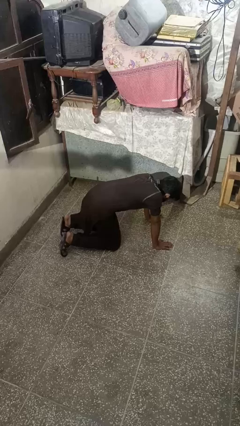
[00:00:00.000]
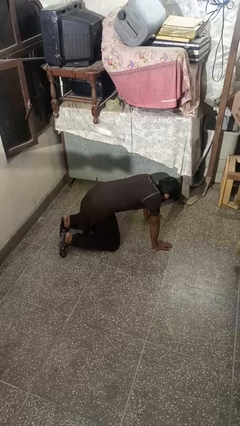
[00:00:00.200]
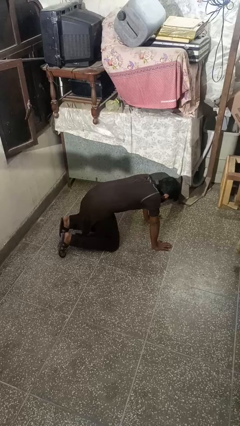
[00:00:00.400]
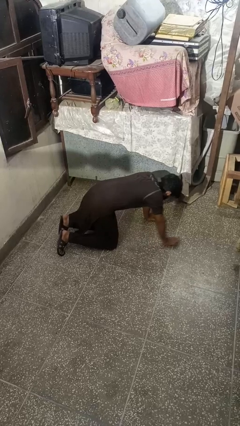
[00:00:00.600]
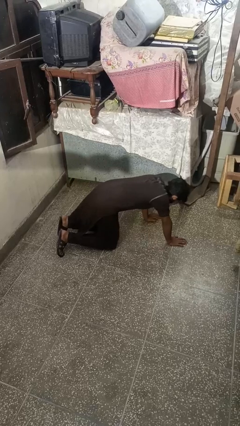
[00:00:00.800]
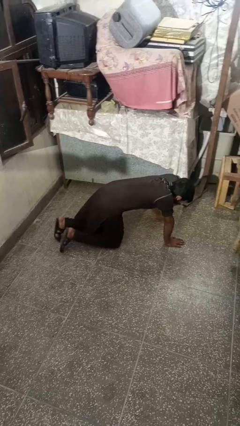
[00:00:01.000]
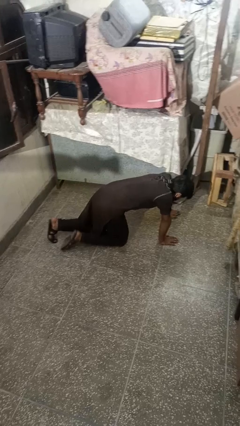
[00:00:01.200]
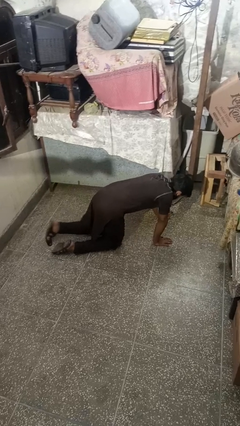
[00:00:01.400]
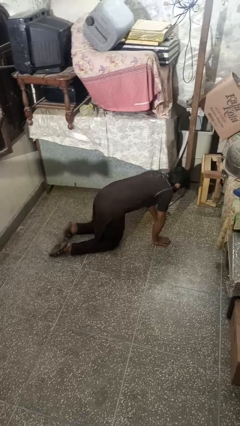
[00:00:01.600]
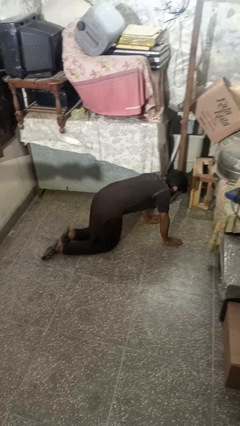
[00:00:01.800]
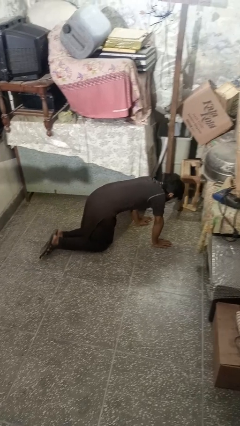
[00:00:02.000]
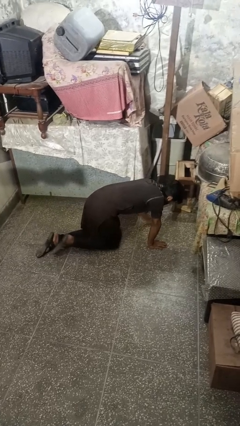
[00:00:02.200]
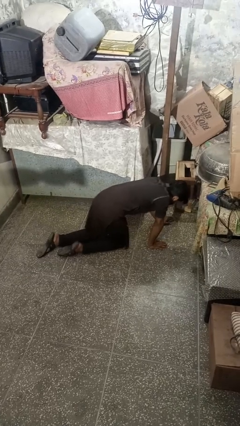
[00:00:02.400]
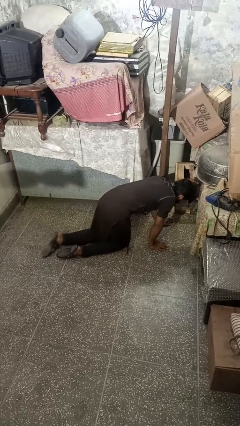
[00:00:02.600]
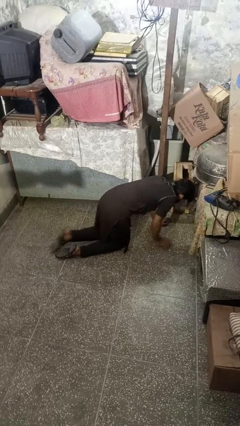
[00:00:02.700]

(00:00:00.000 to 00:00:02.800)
person crawls

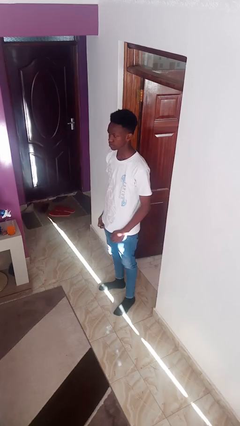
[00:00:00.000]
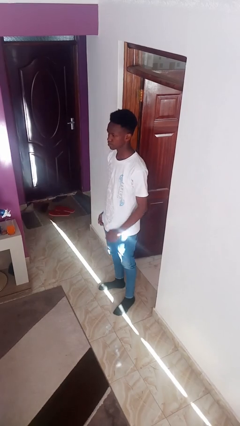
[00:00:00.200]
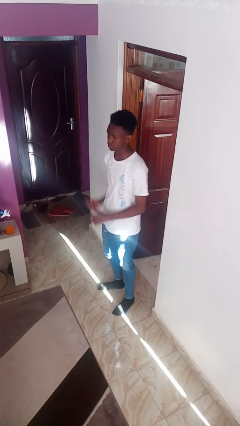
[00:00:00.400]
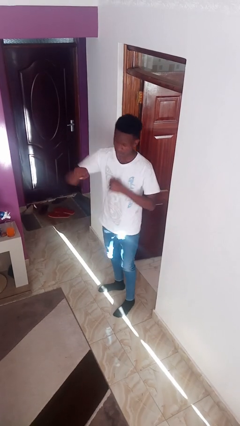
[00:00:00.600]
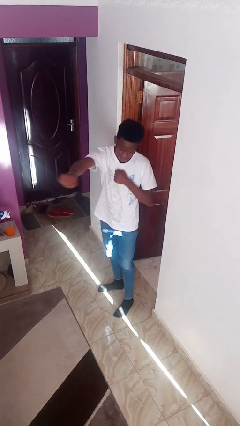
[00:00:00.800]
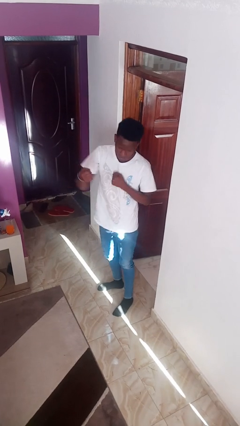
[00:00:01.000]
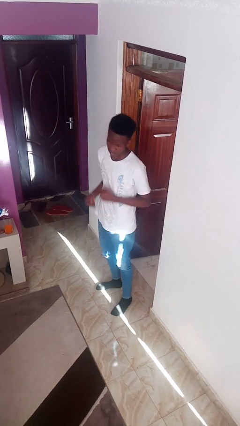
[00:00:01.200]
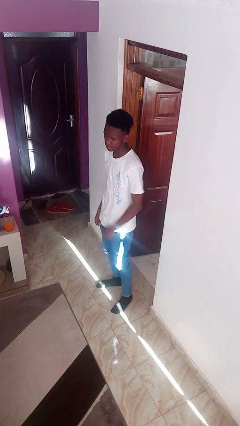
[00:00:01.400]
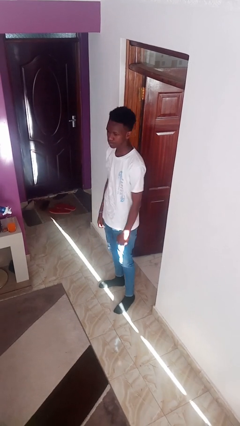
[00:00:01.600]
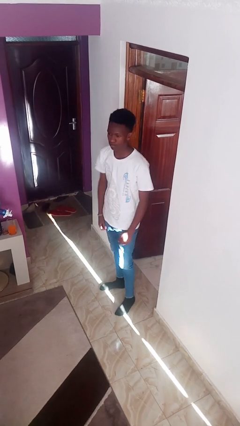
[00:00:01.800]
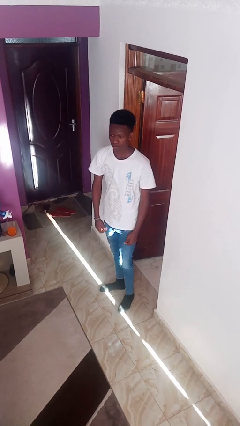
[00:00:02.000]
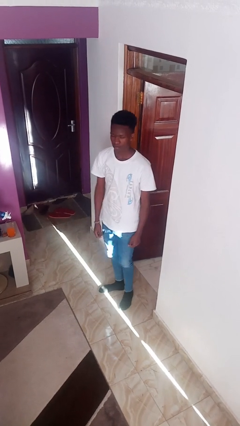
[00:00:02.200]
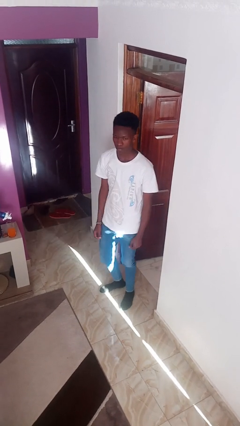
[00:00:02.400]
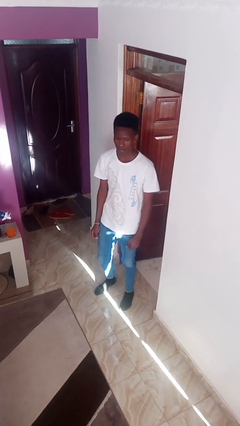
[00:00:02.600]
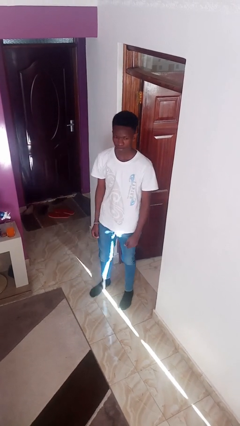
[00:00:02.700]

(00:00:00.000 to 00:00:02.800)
person punches

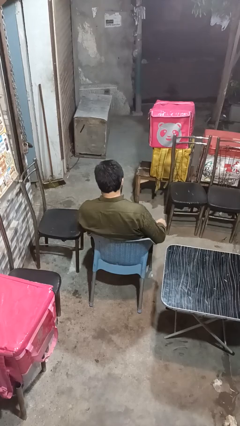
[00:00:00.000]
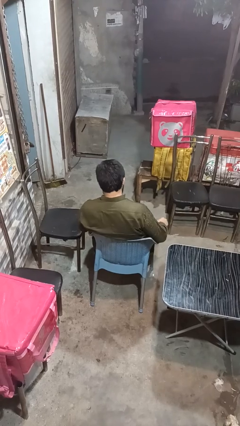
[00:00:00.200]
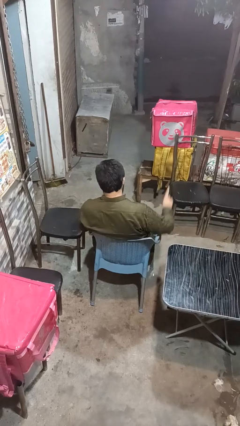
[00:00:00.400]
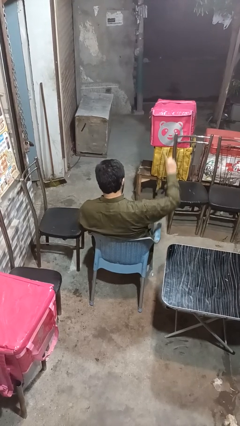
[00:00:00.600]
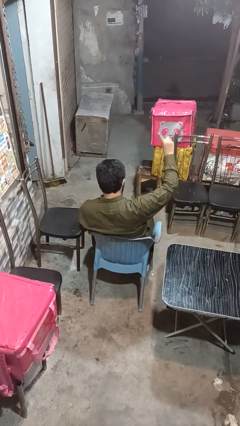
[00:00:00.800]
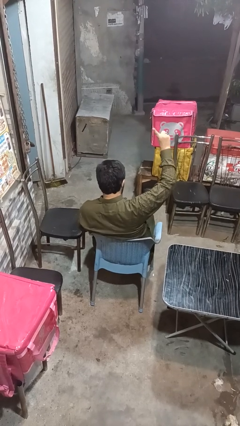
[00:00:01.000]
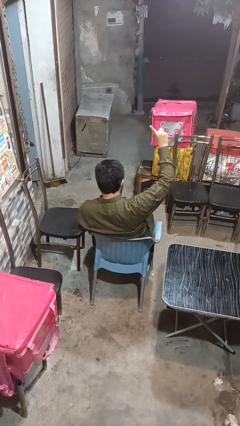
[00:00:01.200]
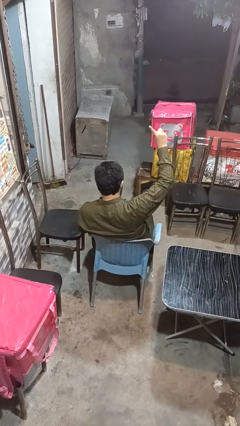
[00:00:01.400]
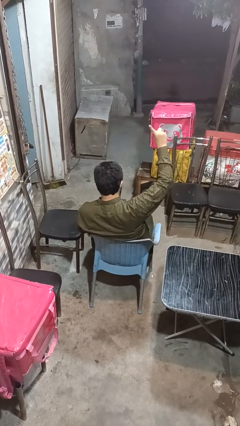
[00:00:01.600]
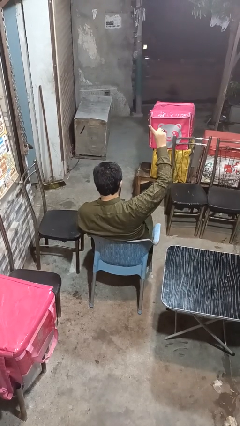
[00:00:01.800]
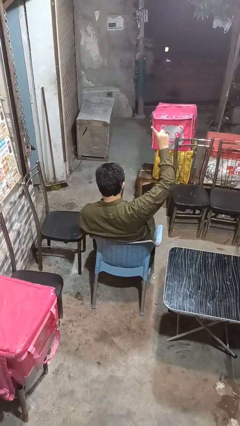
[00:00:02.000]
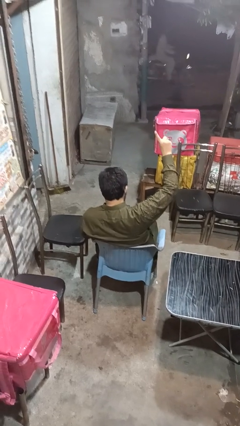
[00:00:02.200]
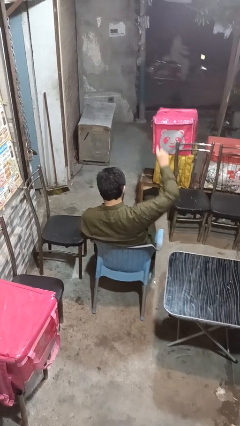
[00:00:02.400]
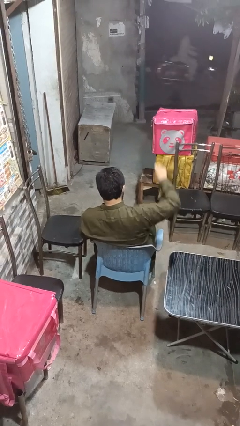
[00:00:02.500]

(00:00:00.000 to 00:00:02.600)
person gestures number one

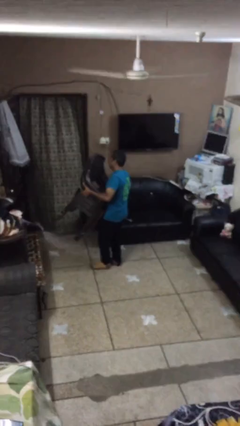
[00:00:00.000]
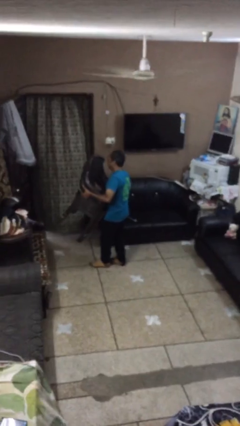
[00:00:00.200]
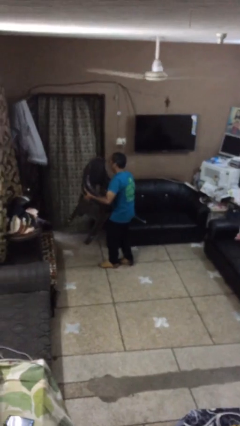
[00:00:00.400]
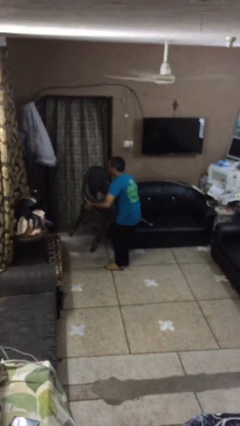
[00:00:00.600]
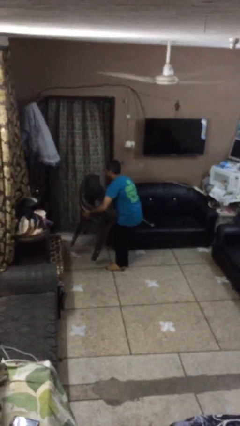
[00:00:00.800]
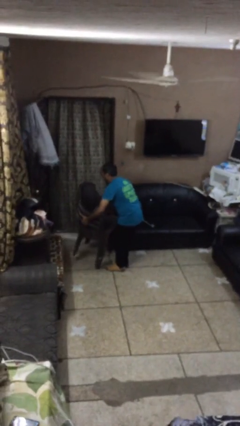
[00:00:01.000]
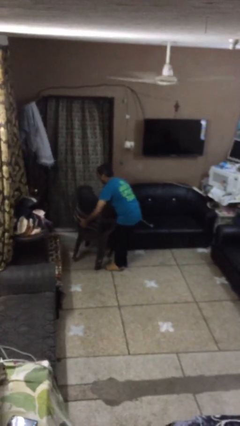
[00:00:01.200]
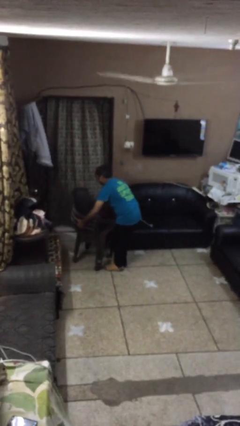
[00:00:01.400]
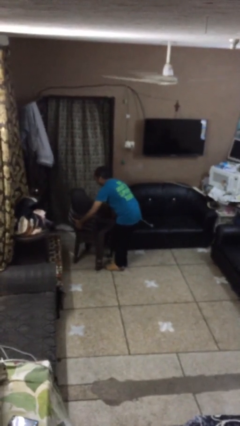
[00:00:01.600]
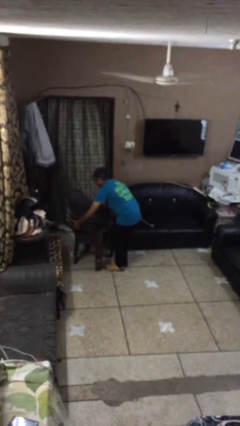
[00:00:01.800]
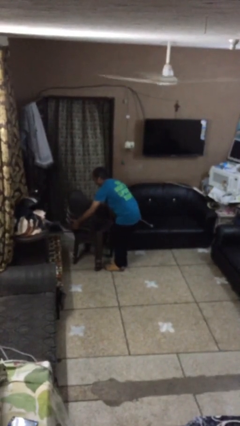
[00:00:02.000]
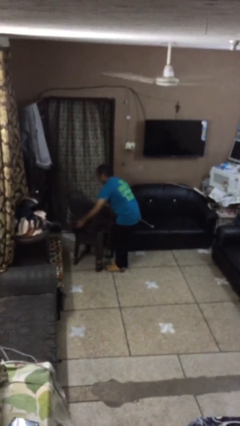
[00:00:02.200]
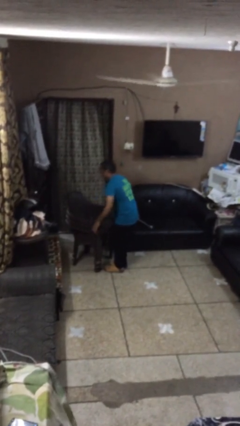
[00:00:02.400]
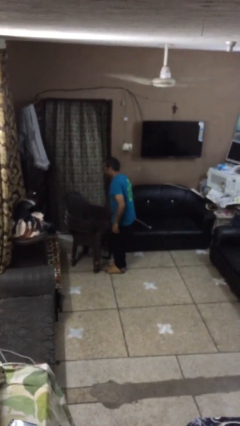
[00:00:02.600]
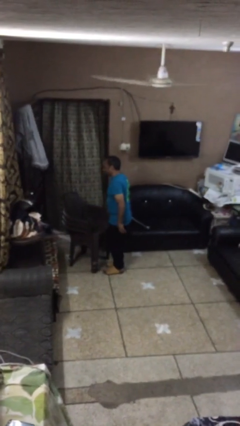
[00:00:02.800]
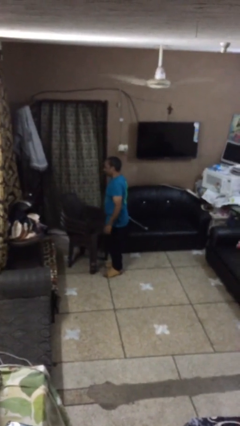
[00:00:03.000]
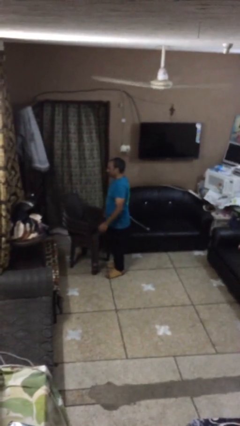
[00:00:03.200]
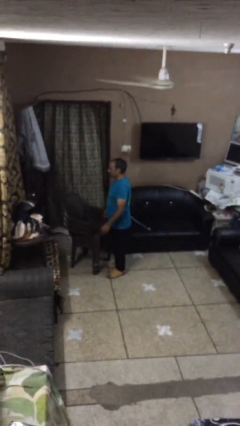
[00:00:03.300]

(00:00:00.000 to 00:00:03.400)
person puts down object on floor

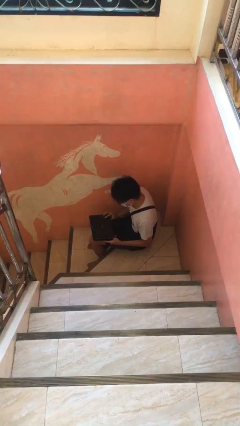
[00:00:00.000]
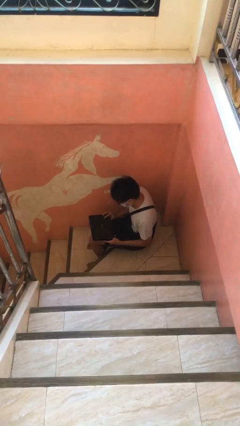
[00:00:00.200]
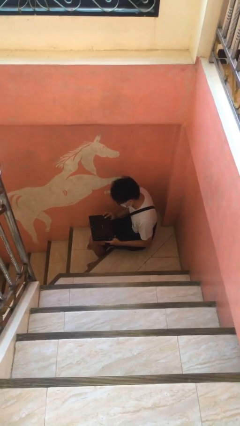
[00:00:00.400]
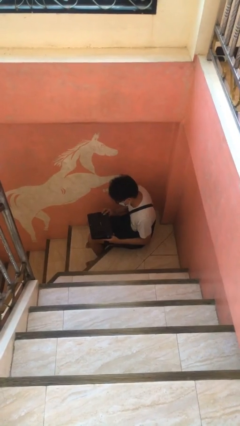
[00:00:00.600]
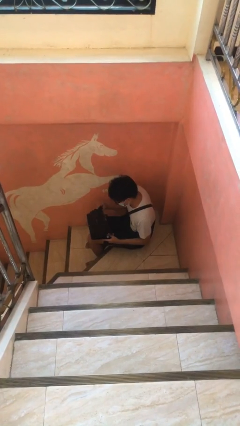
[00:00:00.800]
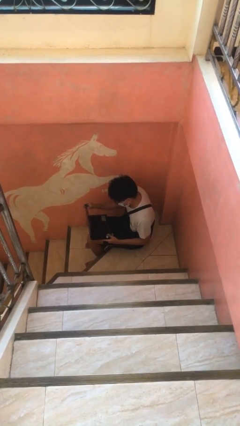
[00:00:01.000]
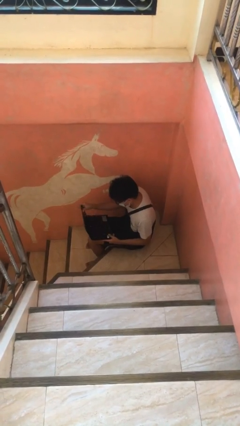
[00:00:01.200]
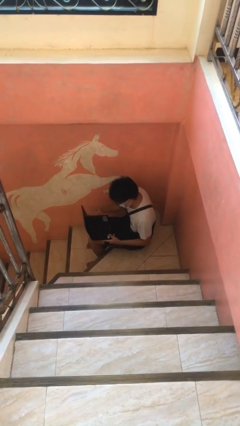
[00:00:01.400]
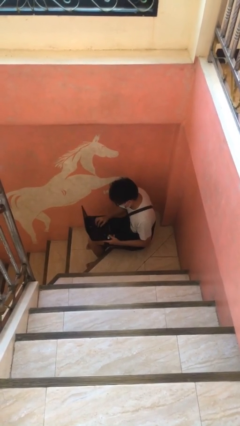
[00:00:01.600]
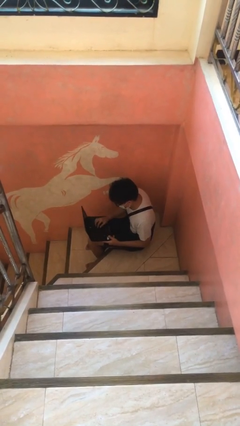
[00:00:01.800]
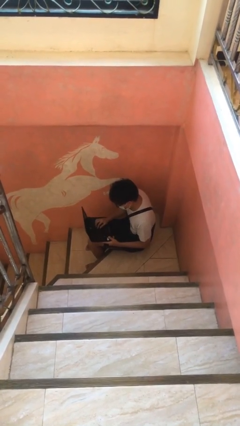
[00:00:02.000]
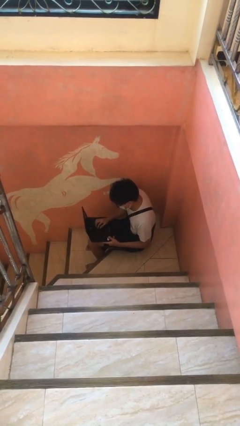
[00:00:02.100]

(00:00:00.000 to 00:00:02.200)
person interacts with laptop

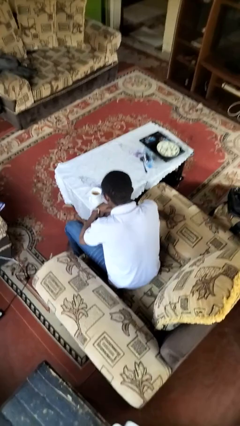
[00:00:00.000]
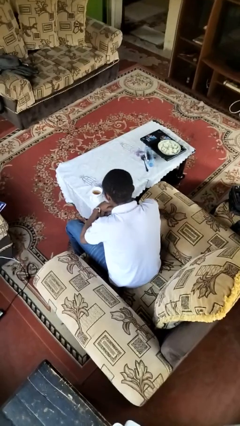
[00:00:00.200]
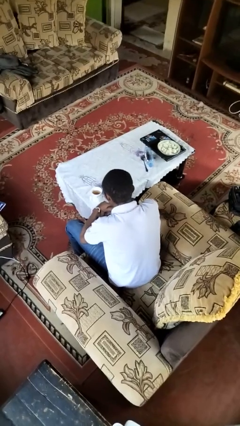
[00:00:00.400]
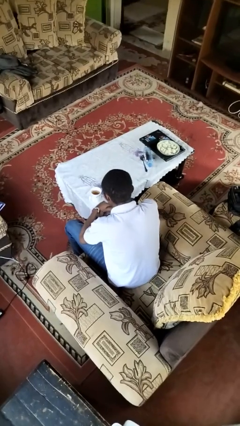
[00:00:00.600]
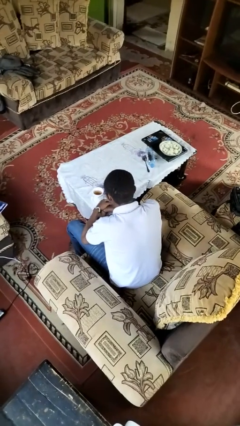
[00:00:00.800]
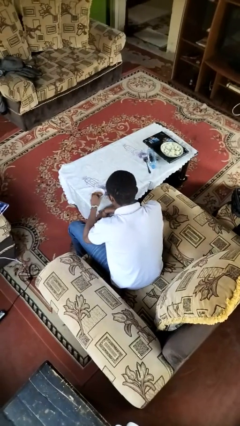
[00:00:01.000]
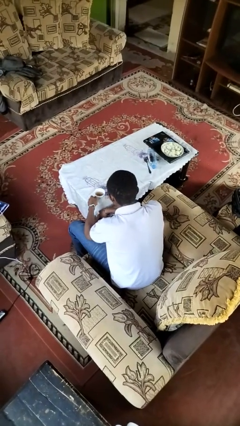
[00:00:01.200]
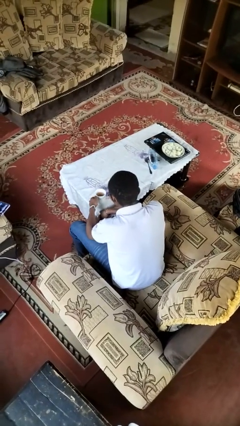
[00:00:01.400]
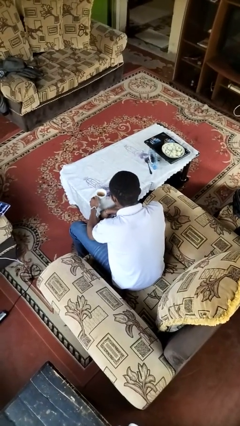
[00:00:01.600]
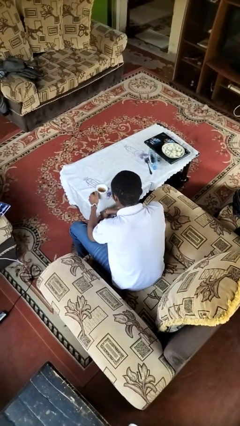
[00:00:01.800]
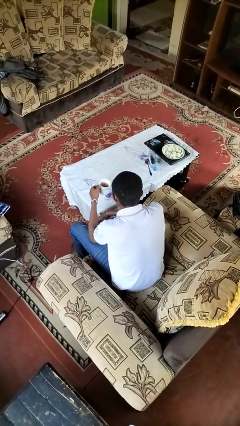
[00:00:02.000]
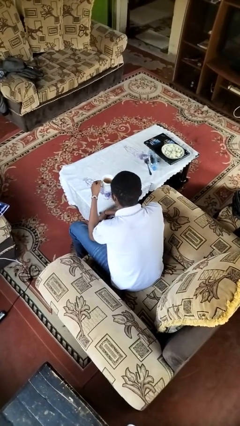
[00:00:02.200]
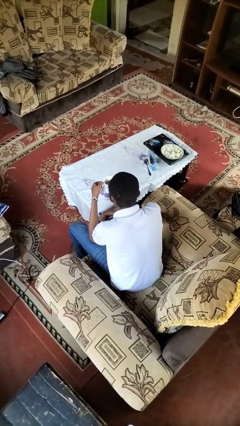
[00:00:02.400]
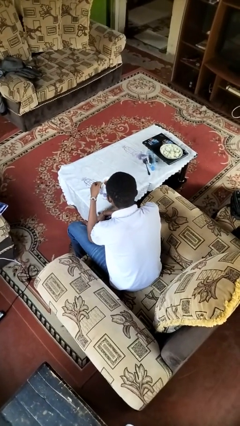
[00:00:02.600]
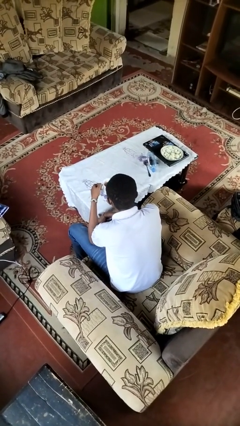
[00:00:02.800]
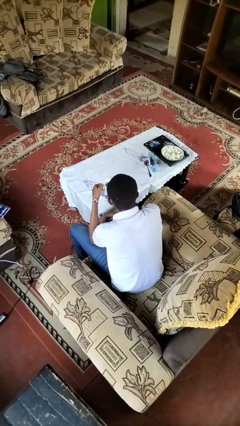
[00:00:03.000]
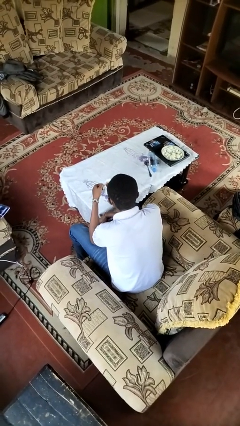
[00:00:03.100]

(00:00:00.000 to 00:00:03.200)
person picks up object from table
